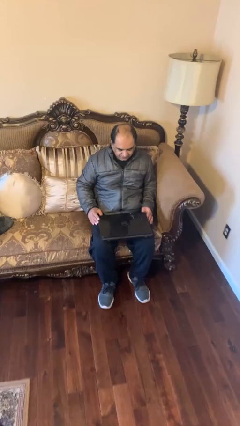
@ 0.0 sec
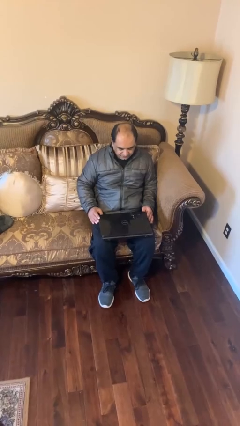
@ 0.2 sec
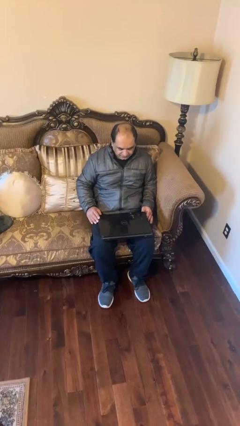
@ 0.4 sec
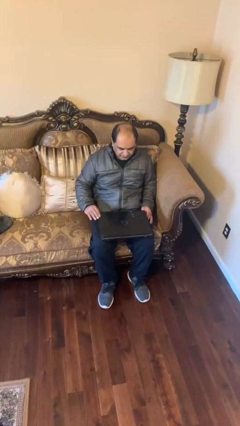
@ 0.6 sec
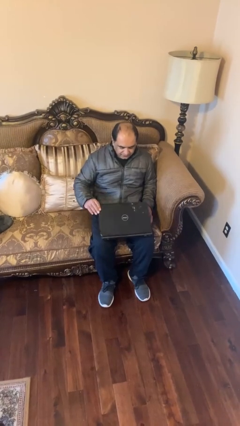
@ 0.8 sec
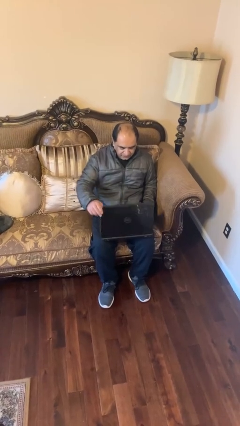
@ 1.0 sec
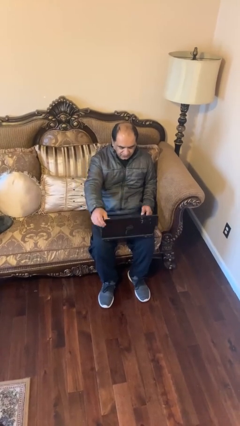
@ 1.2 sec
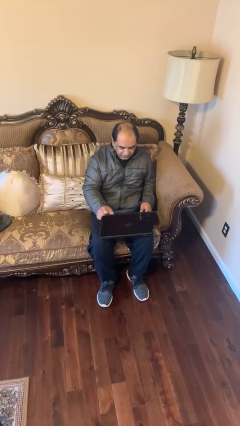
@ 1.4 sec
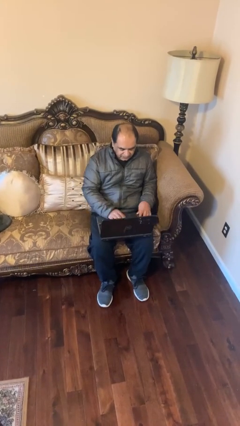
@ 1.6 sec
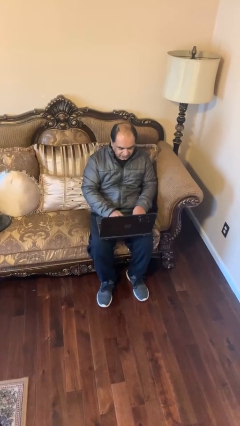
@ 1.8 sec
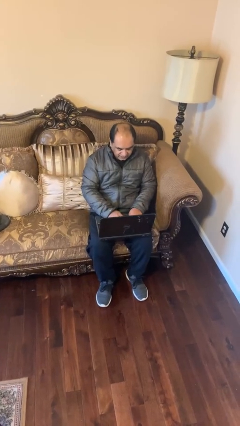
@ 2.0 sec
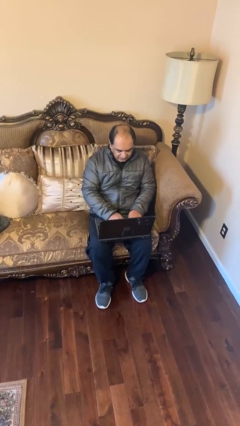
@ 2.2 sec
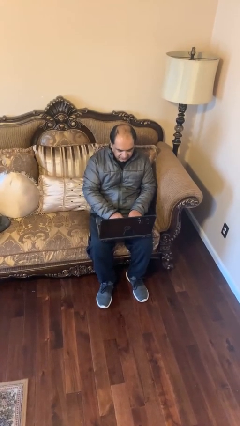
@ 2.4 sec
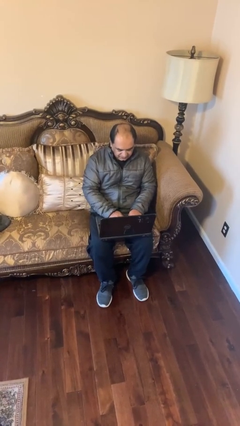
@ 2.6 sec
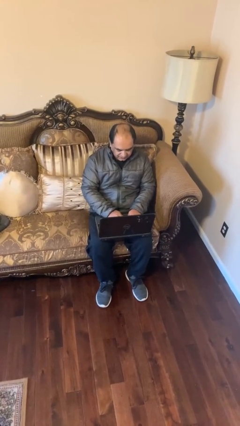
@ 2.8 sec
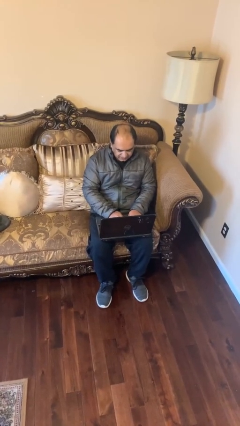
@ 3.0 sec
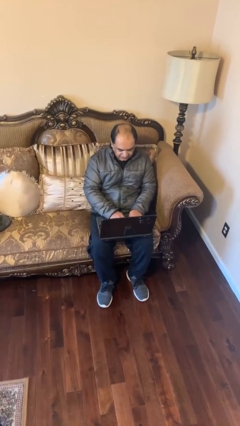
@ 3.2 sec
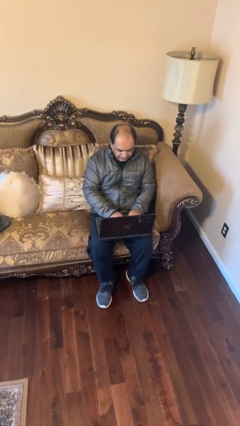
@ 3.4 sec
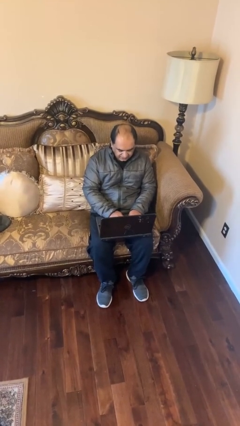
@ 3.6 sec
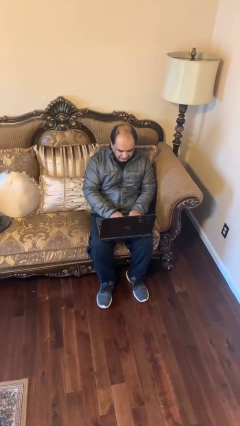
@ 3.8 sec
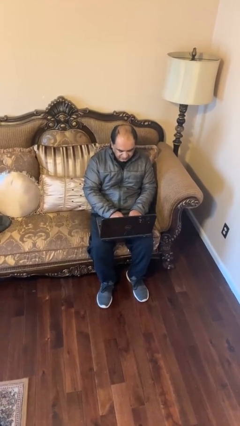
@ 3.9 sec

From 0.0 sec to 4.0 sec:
person interacts with laptop

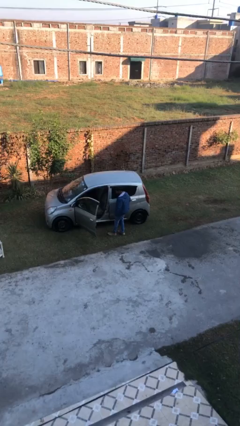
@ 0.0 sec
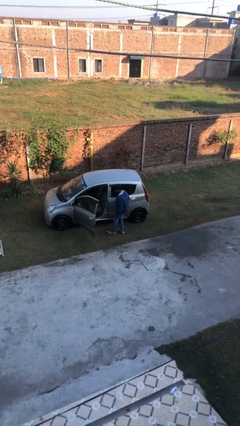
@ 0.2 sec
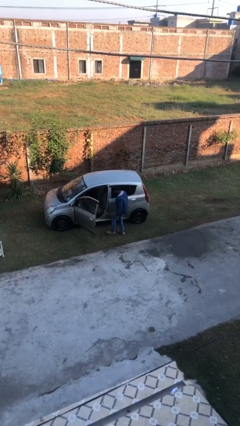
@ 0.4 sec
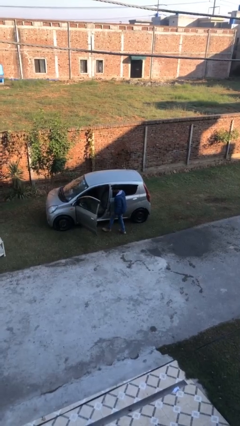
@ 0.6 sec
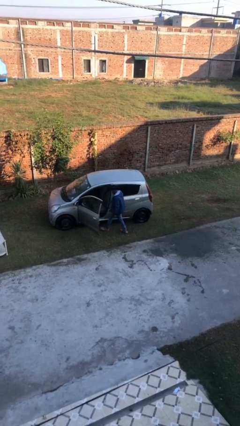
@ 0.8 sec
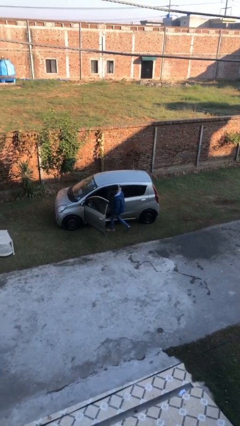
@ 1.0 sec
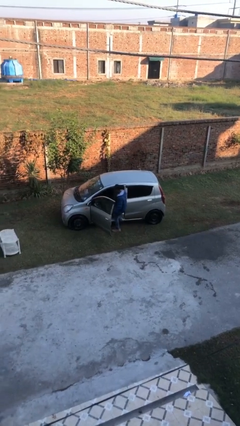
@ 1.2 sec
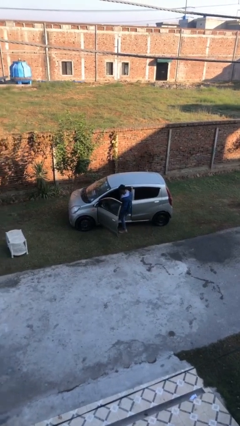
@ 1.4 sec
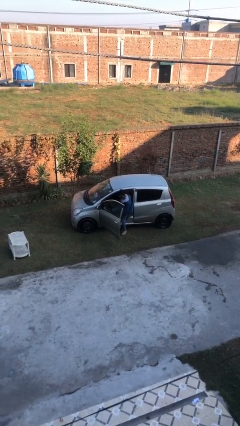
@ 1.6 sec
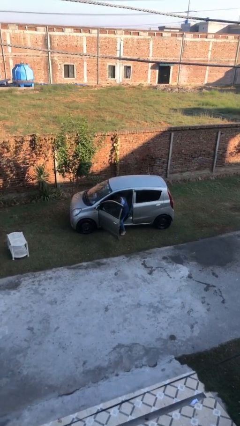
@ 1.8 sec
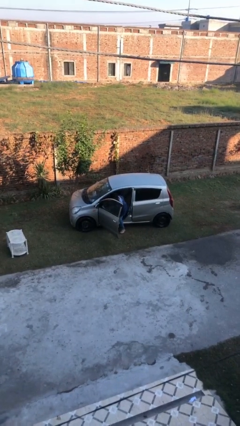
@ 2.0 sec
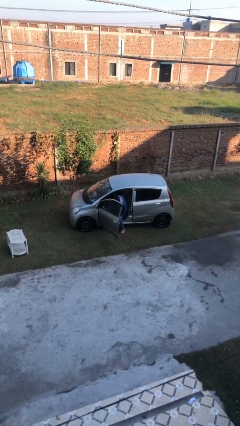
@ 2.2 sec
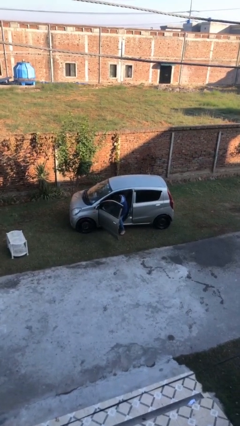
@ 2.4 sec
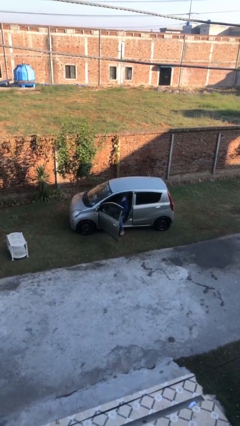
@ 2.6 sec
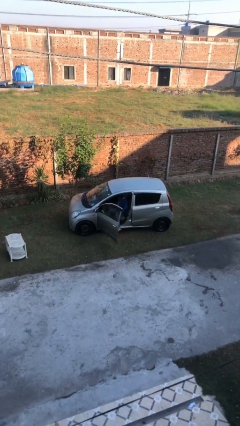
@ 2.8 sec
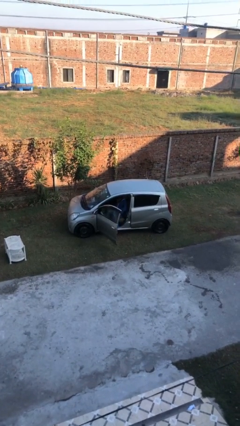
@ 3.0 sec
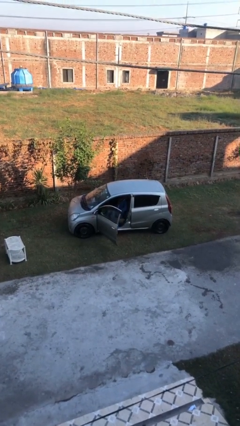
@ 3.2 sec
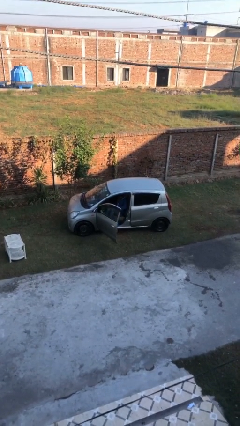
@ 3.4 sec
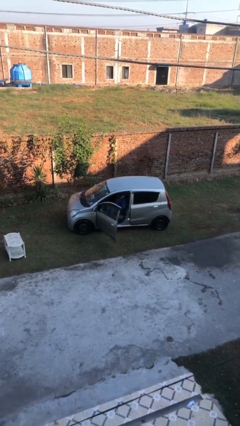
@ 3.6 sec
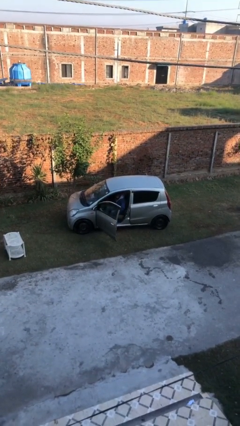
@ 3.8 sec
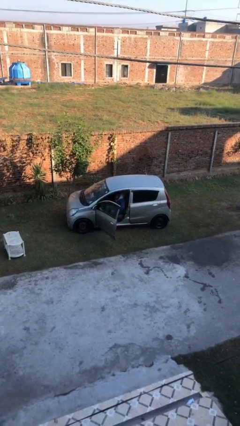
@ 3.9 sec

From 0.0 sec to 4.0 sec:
person enters car

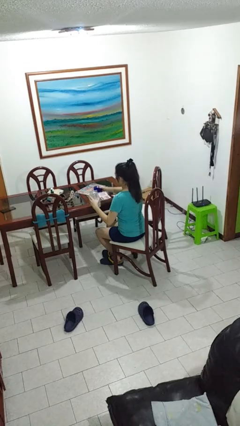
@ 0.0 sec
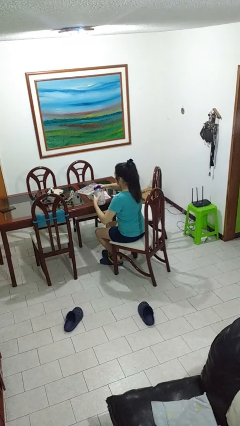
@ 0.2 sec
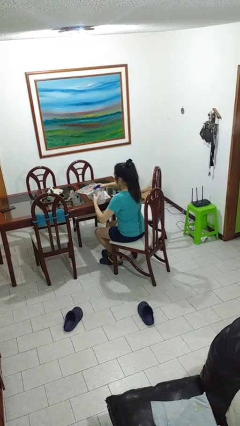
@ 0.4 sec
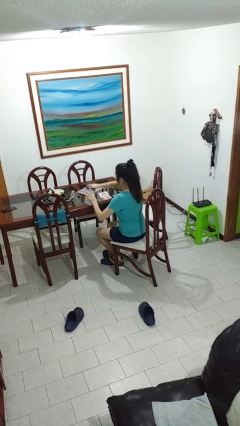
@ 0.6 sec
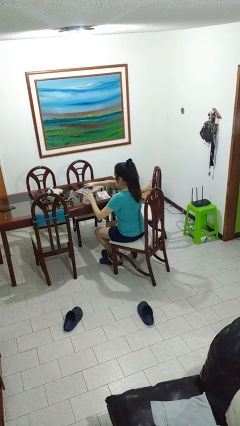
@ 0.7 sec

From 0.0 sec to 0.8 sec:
person closes jar

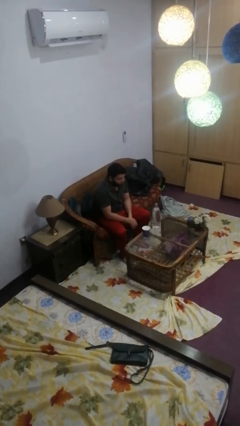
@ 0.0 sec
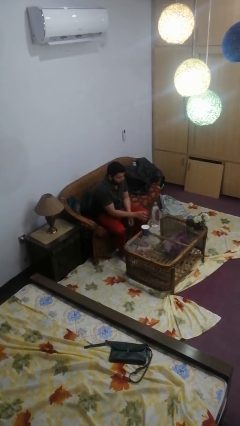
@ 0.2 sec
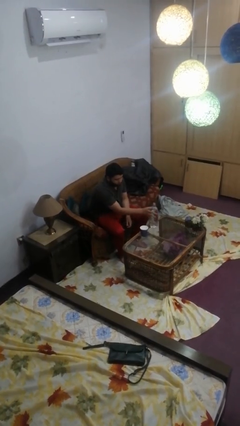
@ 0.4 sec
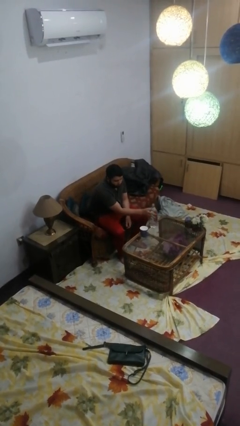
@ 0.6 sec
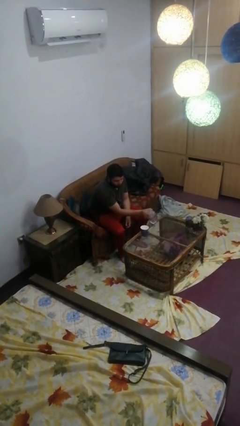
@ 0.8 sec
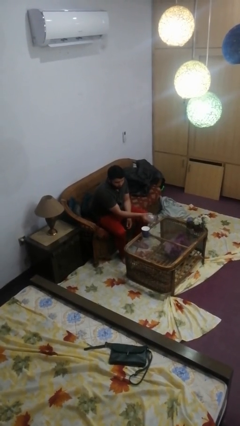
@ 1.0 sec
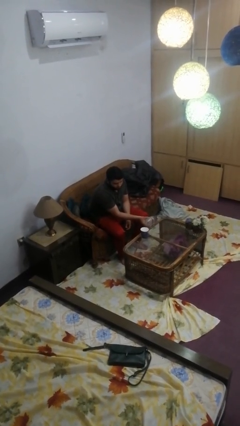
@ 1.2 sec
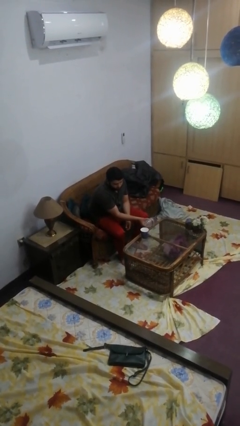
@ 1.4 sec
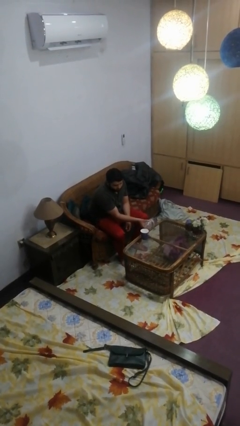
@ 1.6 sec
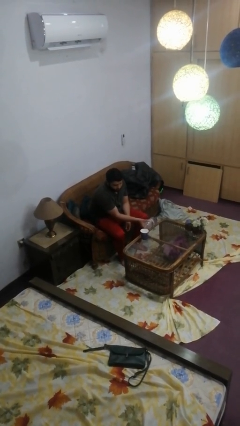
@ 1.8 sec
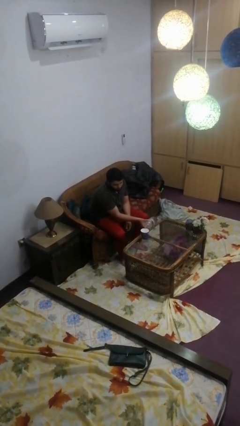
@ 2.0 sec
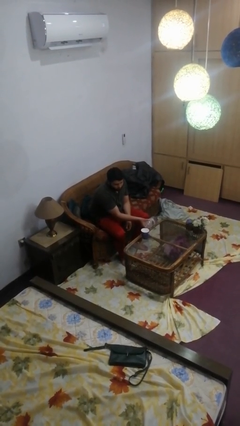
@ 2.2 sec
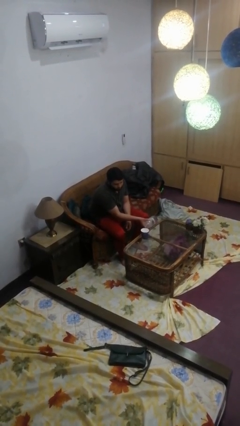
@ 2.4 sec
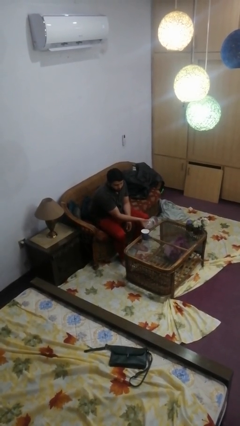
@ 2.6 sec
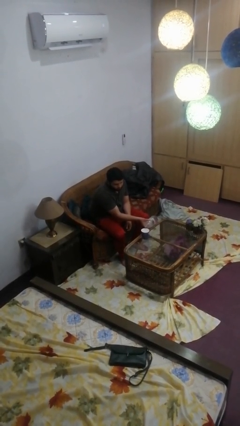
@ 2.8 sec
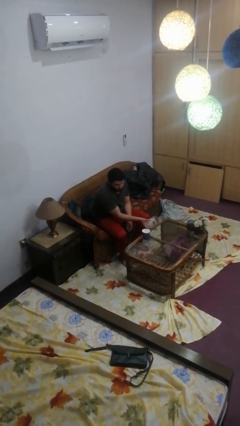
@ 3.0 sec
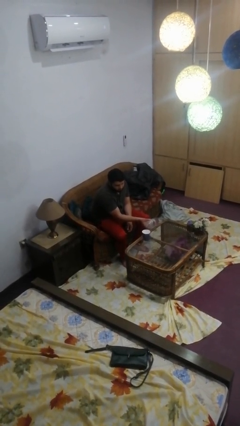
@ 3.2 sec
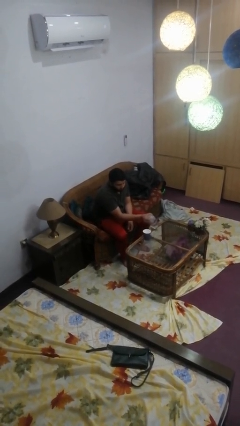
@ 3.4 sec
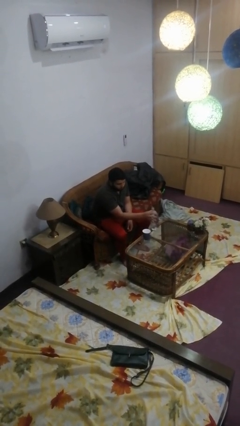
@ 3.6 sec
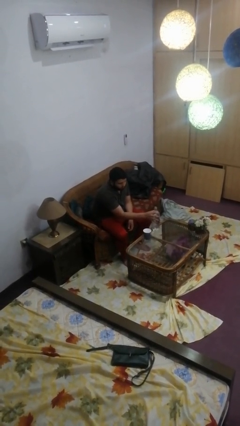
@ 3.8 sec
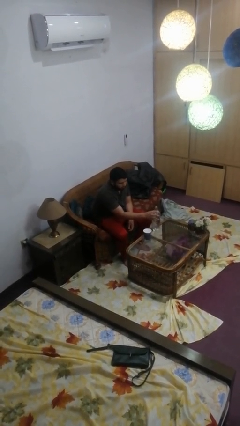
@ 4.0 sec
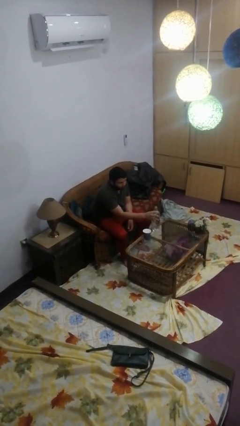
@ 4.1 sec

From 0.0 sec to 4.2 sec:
person pours liquid into cup

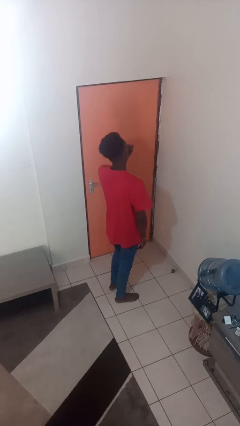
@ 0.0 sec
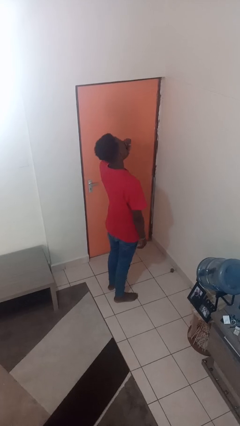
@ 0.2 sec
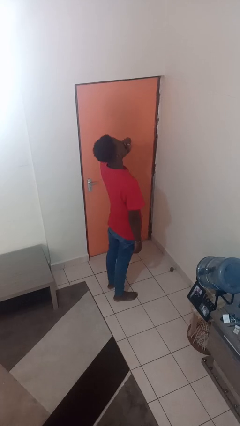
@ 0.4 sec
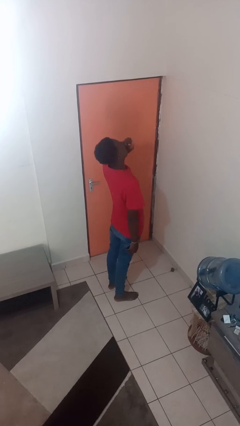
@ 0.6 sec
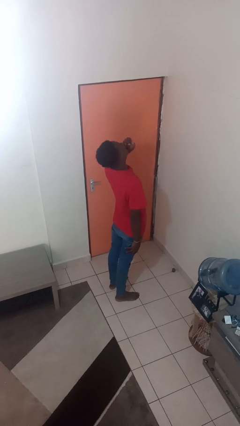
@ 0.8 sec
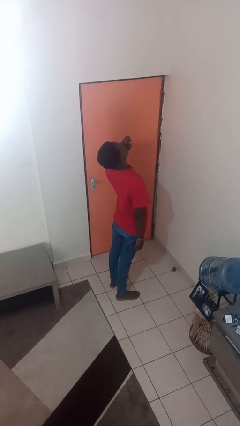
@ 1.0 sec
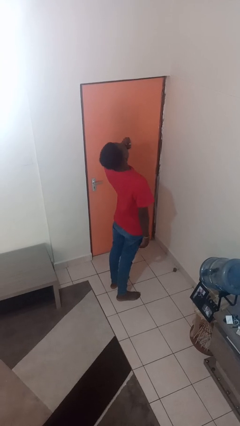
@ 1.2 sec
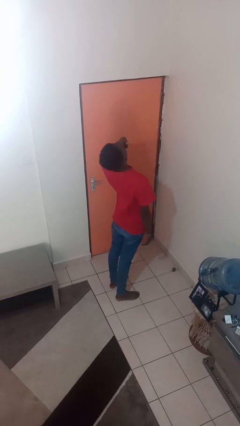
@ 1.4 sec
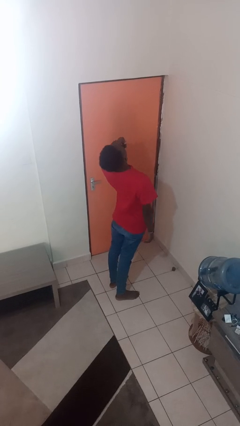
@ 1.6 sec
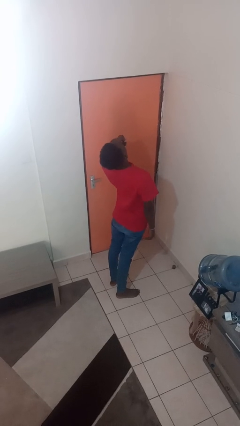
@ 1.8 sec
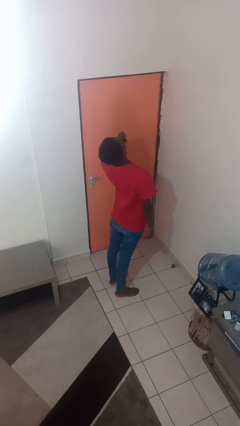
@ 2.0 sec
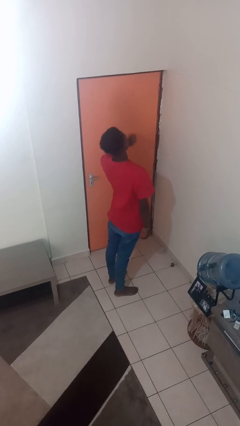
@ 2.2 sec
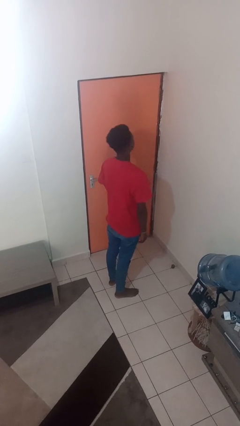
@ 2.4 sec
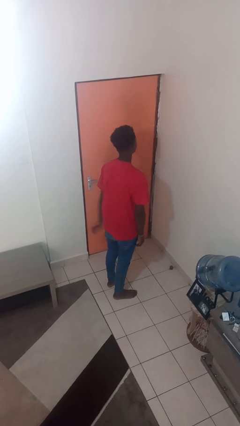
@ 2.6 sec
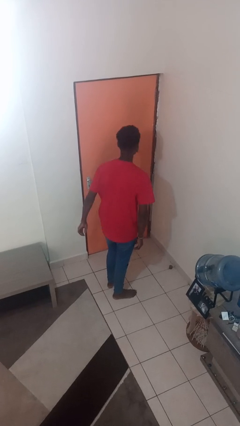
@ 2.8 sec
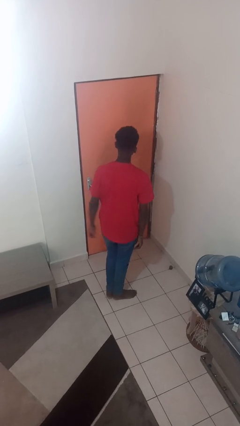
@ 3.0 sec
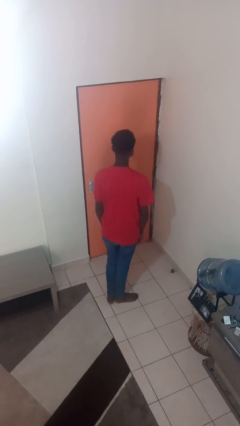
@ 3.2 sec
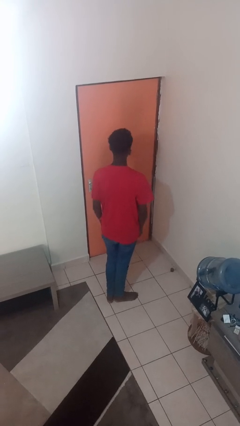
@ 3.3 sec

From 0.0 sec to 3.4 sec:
person yawns

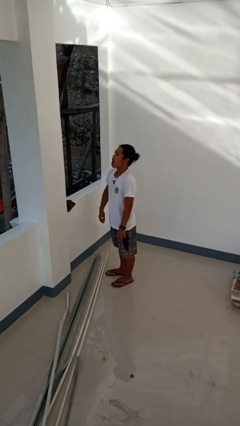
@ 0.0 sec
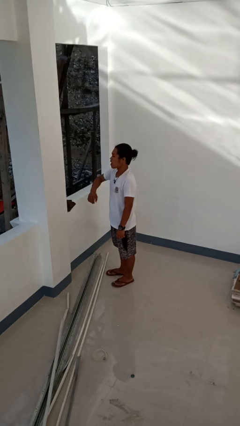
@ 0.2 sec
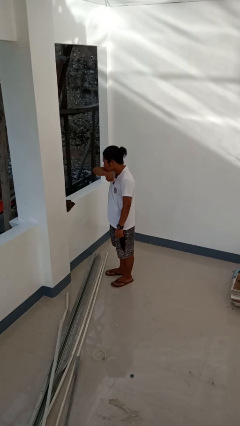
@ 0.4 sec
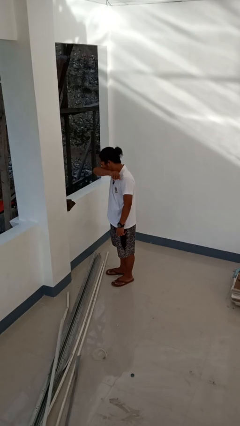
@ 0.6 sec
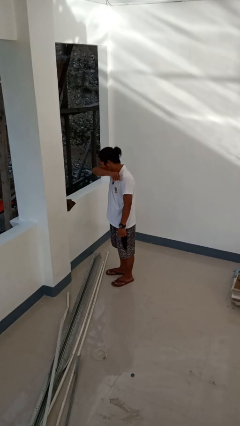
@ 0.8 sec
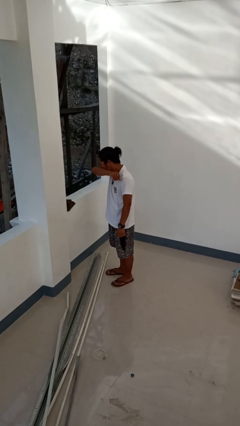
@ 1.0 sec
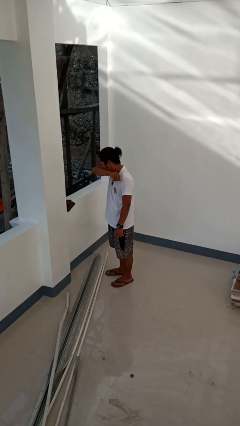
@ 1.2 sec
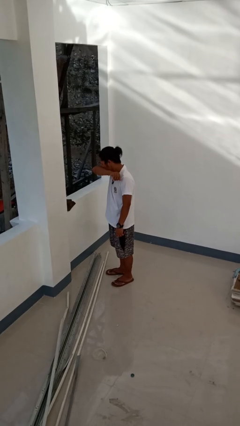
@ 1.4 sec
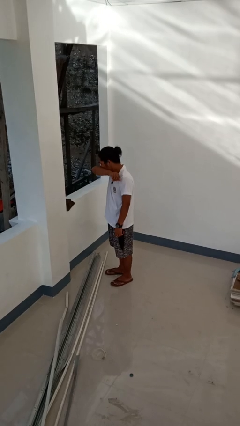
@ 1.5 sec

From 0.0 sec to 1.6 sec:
person sneezes into arm
